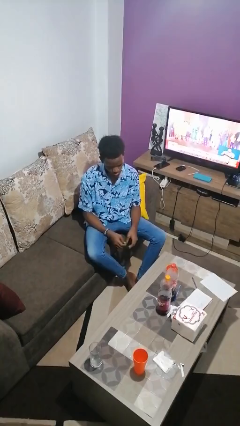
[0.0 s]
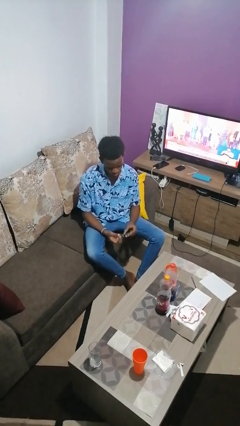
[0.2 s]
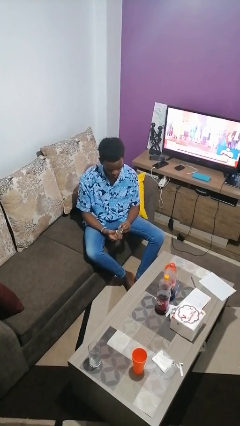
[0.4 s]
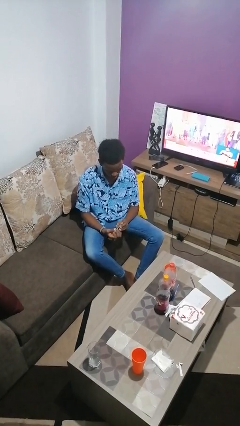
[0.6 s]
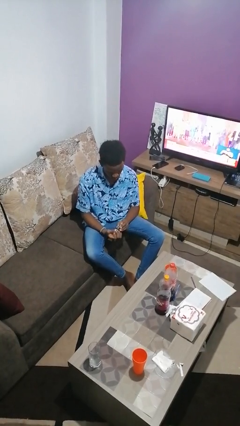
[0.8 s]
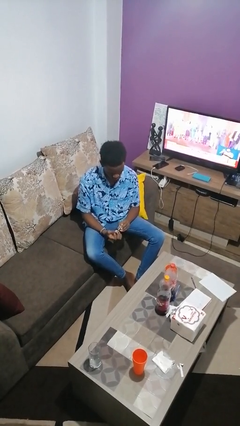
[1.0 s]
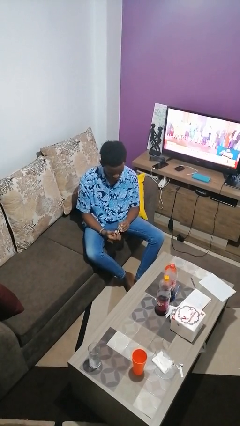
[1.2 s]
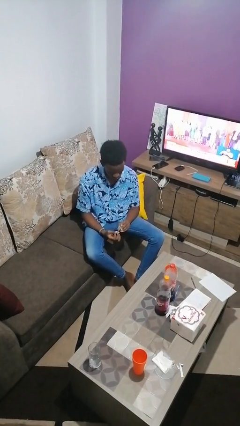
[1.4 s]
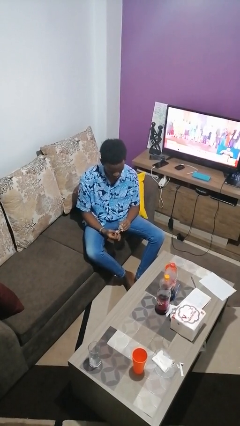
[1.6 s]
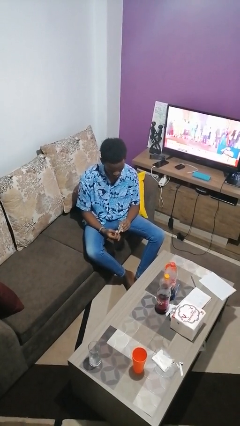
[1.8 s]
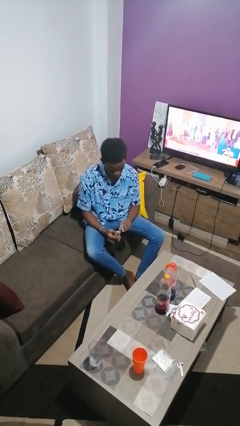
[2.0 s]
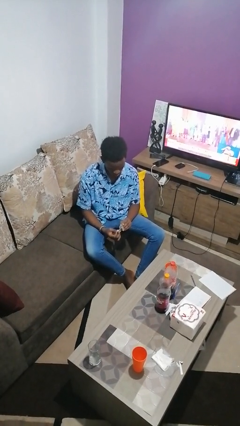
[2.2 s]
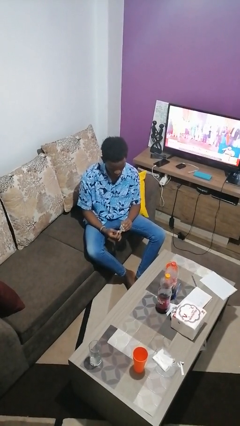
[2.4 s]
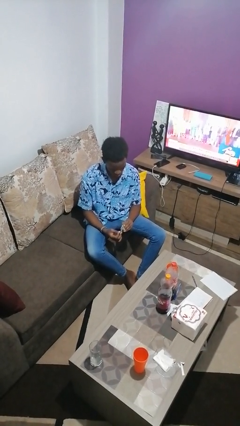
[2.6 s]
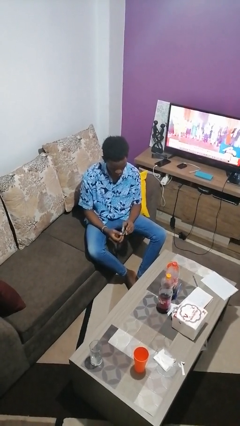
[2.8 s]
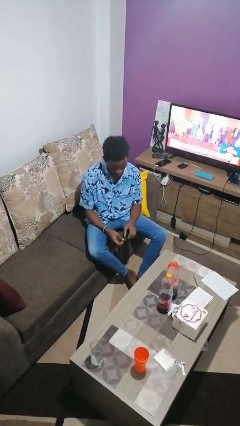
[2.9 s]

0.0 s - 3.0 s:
person clips fingernails

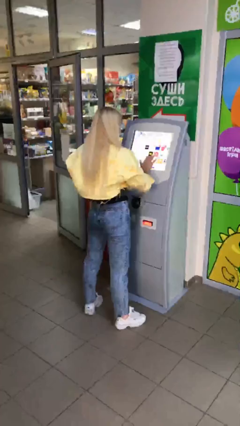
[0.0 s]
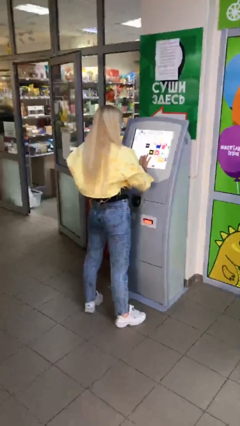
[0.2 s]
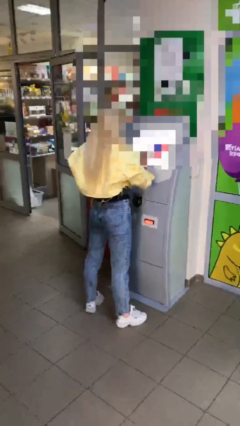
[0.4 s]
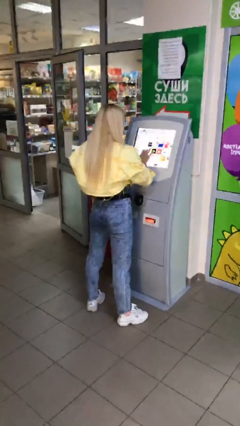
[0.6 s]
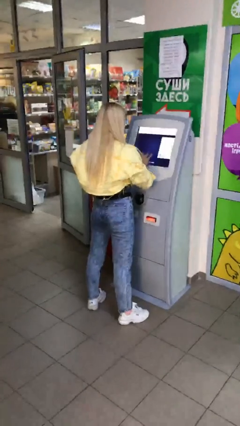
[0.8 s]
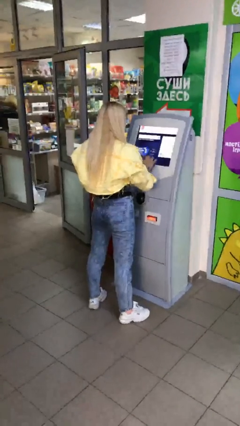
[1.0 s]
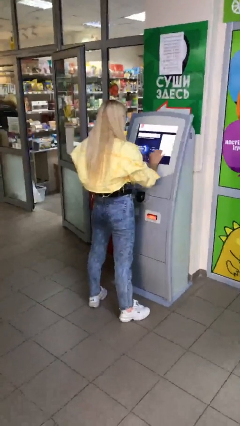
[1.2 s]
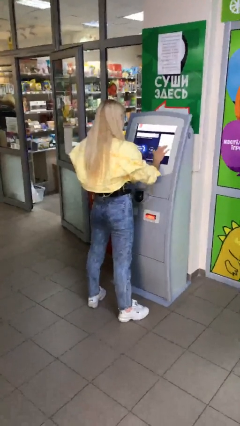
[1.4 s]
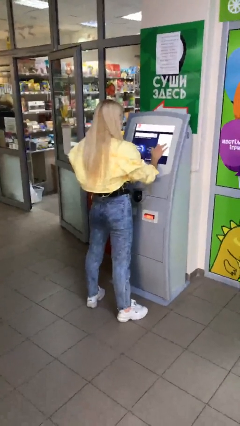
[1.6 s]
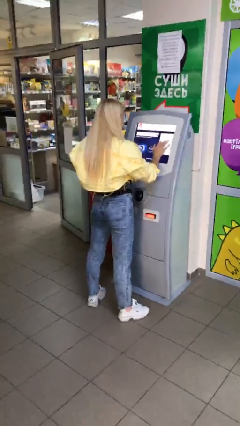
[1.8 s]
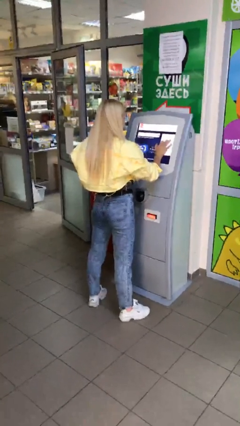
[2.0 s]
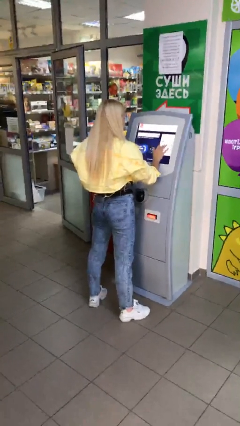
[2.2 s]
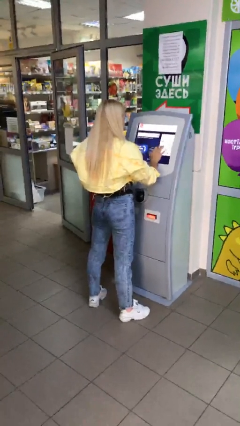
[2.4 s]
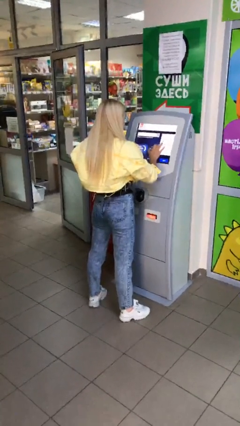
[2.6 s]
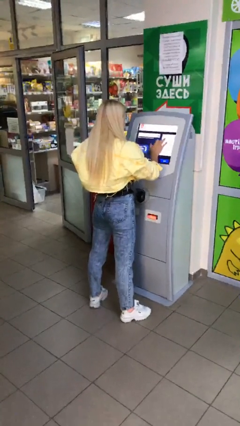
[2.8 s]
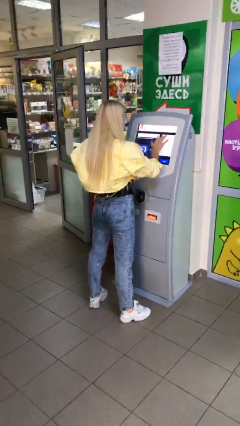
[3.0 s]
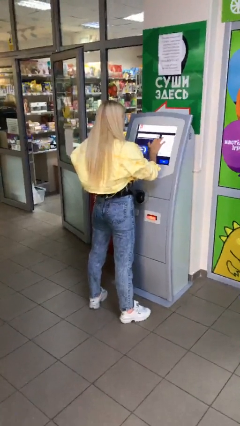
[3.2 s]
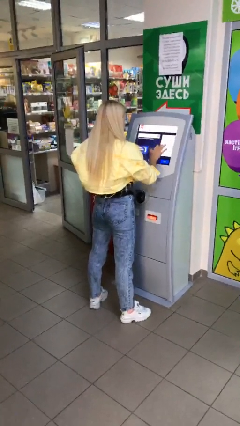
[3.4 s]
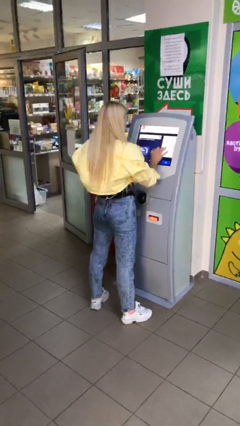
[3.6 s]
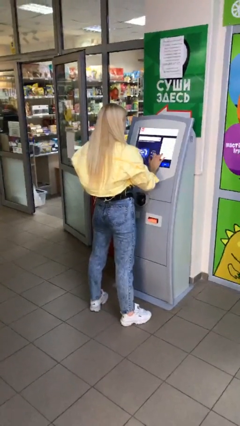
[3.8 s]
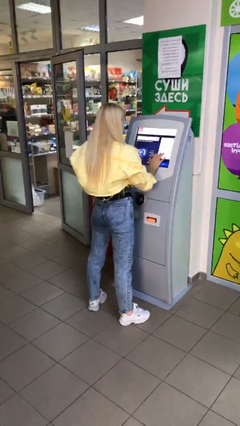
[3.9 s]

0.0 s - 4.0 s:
person purchases from machine

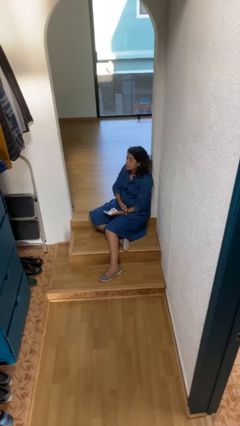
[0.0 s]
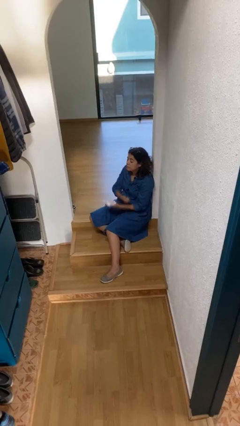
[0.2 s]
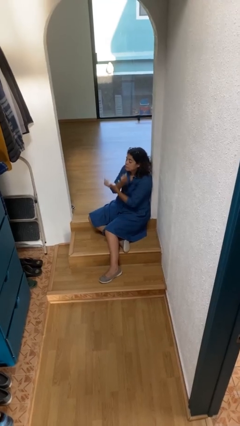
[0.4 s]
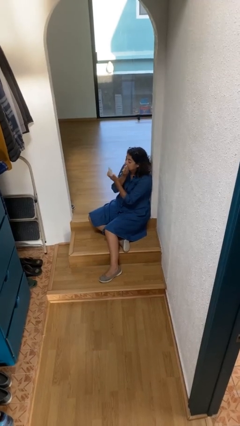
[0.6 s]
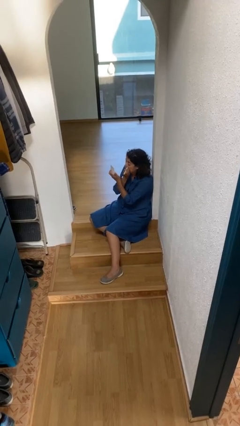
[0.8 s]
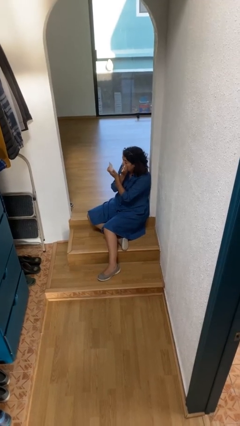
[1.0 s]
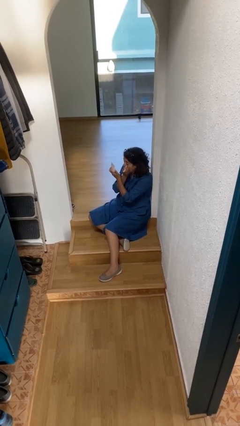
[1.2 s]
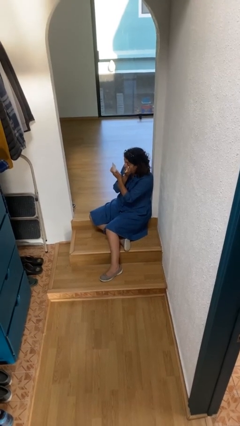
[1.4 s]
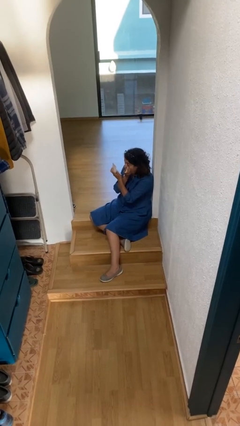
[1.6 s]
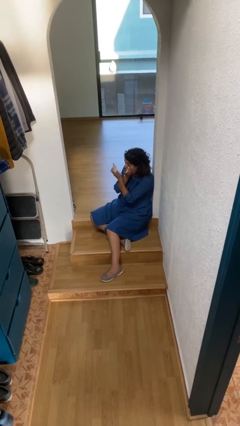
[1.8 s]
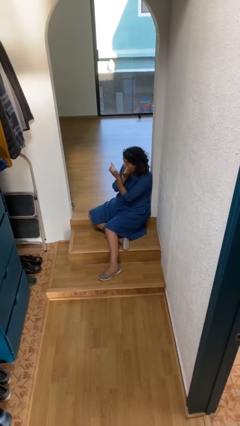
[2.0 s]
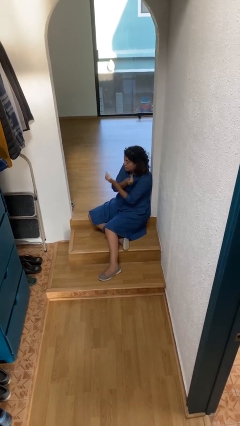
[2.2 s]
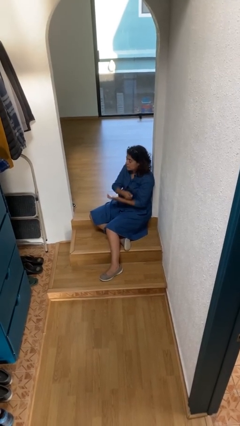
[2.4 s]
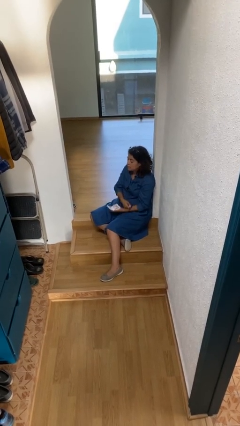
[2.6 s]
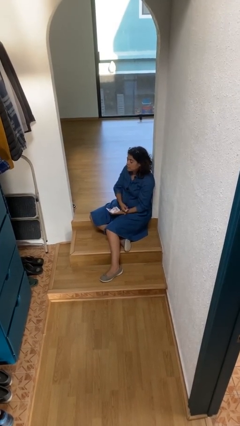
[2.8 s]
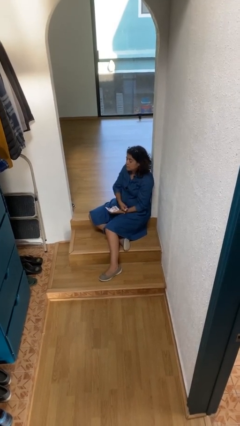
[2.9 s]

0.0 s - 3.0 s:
person applies eye makeup

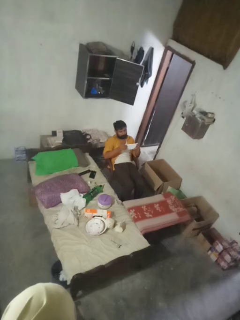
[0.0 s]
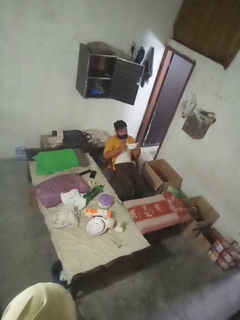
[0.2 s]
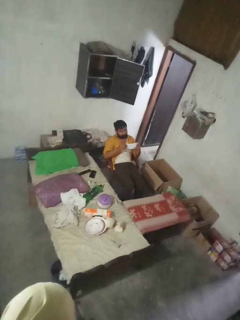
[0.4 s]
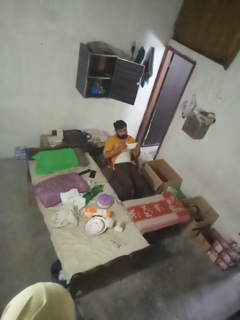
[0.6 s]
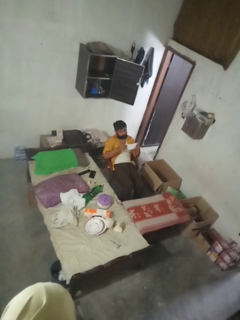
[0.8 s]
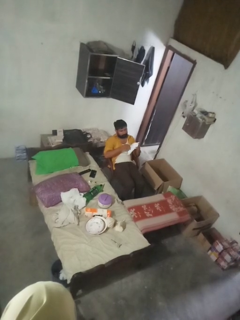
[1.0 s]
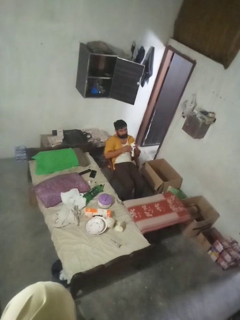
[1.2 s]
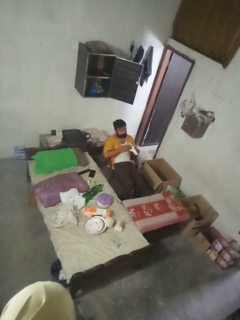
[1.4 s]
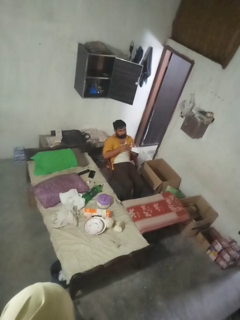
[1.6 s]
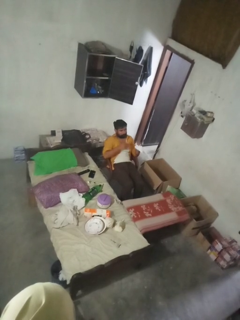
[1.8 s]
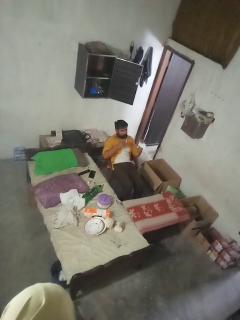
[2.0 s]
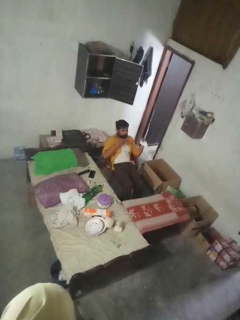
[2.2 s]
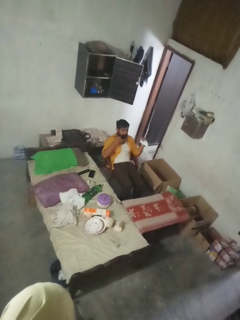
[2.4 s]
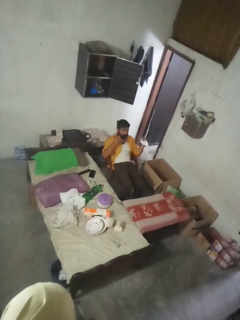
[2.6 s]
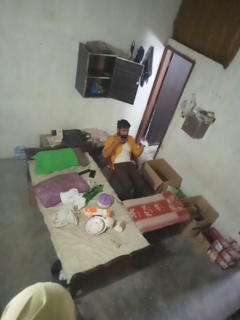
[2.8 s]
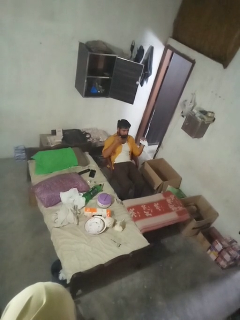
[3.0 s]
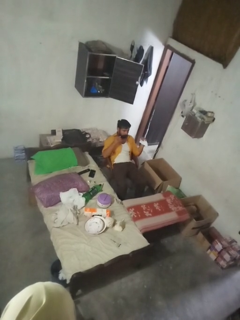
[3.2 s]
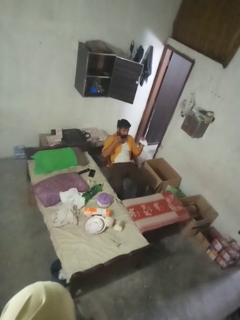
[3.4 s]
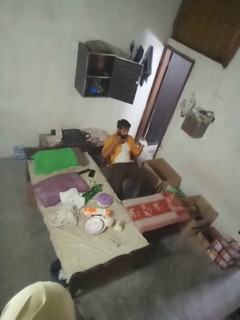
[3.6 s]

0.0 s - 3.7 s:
person crumples paper

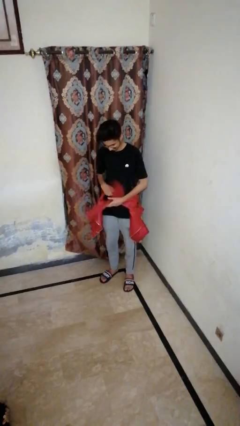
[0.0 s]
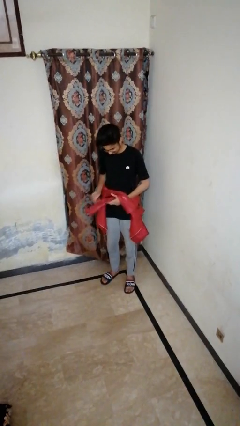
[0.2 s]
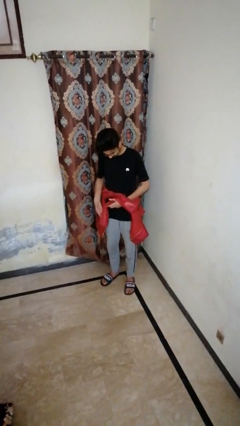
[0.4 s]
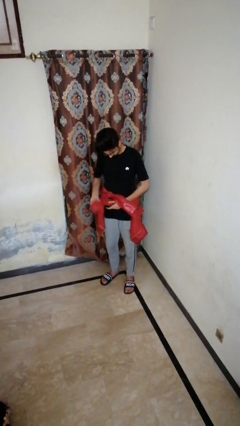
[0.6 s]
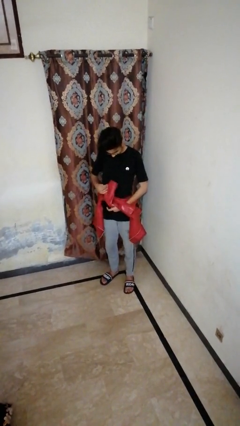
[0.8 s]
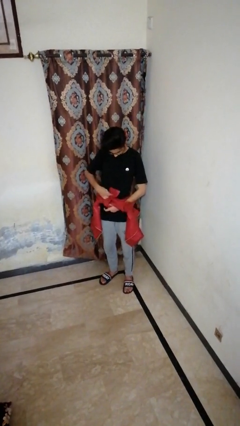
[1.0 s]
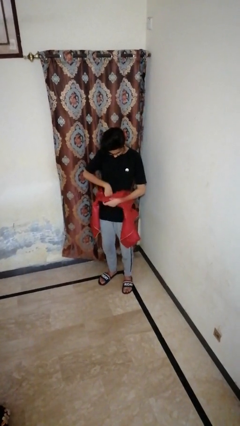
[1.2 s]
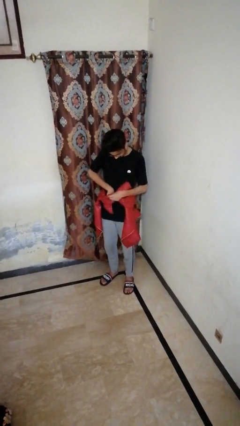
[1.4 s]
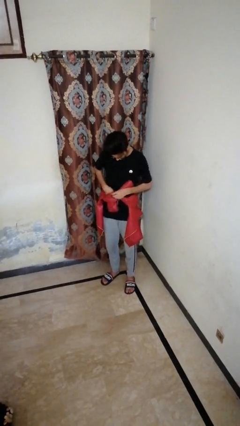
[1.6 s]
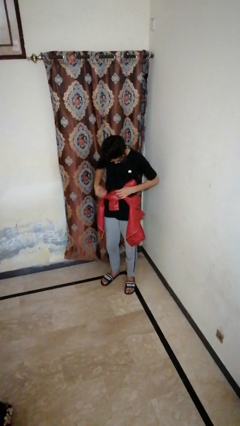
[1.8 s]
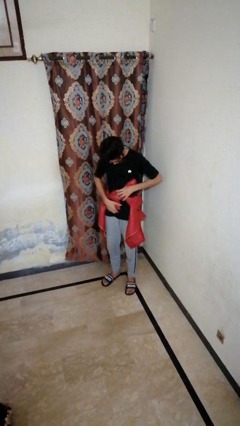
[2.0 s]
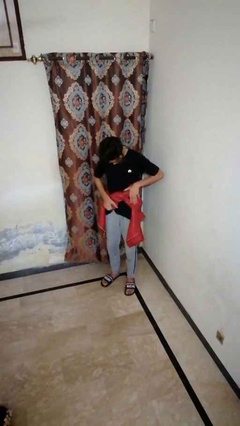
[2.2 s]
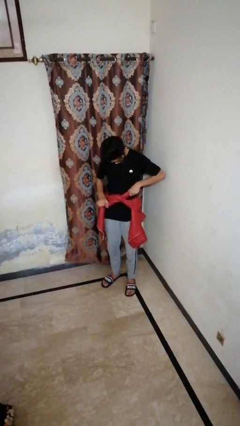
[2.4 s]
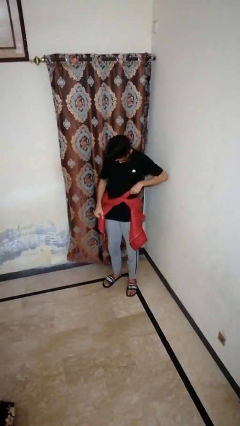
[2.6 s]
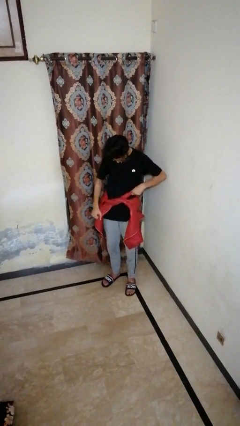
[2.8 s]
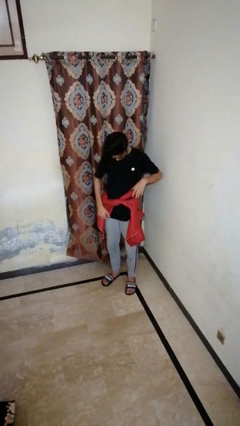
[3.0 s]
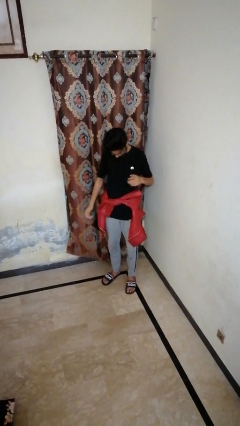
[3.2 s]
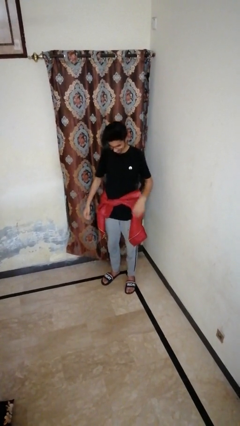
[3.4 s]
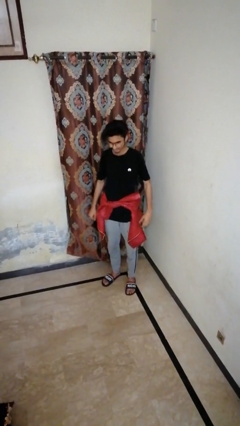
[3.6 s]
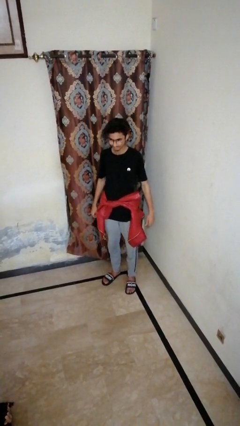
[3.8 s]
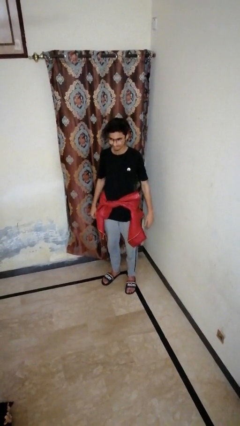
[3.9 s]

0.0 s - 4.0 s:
person ties jacket around waist

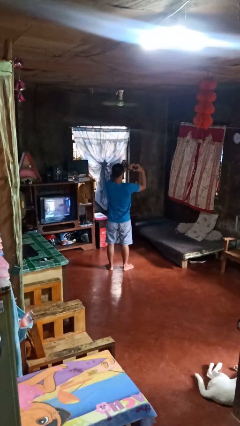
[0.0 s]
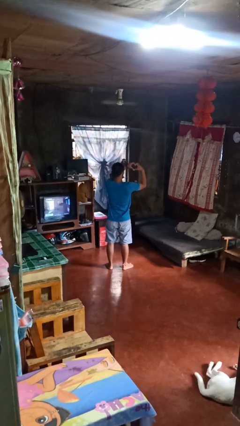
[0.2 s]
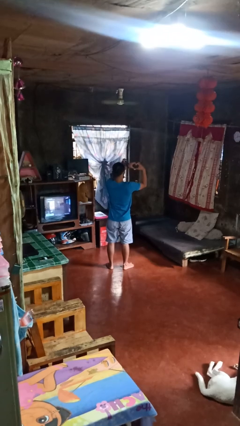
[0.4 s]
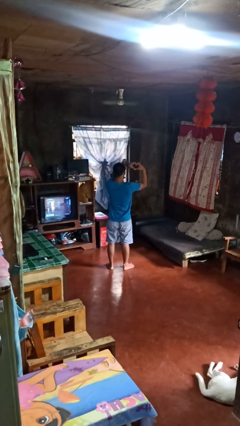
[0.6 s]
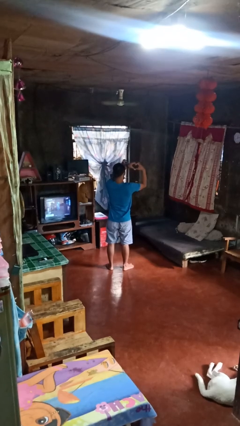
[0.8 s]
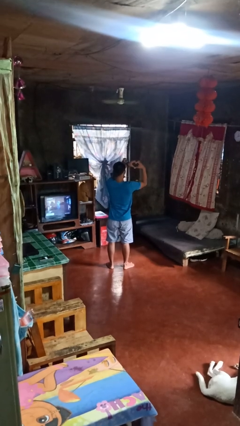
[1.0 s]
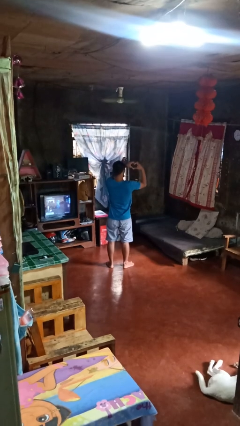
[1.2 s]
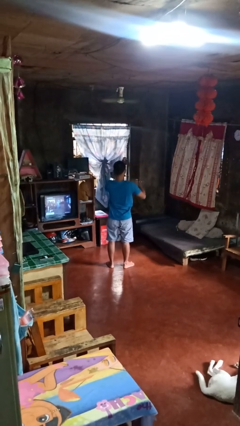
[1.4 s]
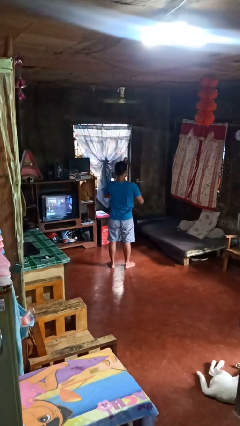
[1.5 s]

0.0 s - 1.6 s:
person gestures heart
